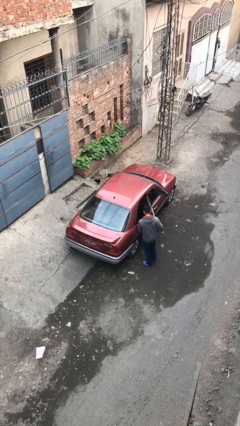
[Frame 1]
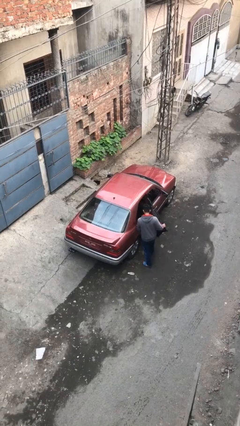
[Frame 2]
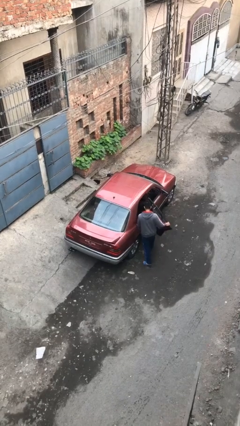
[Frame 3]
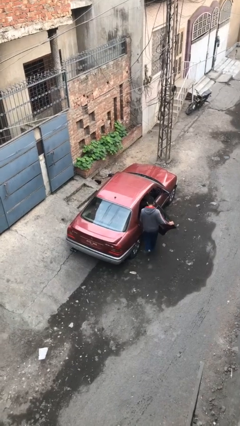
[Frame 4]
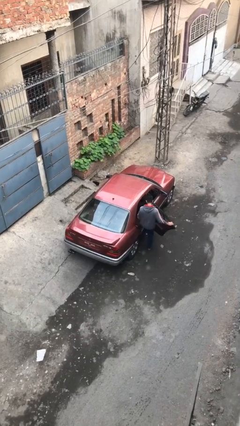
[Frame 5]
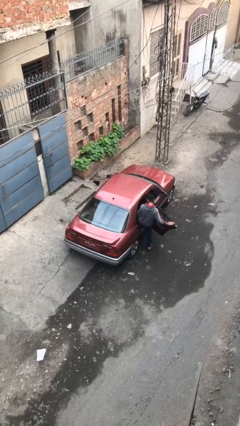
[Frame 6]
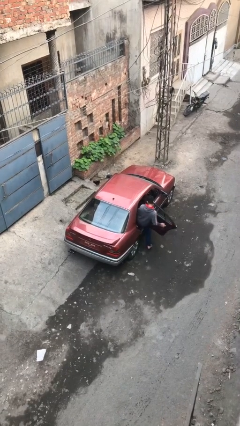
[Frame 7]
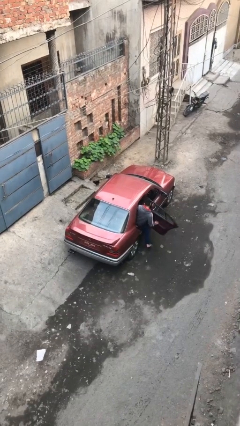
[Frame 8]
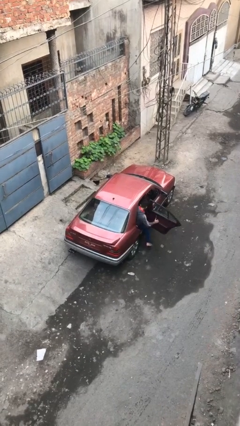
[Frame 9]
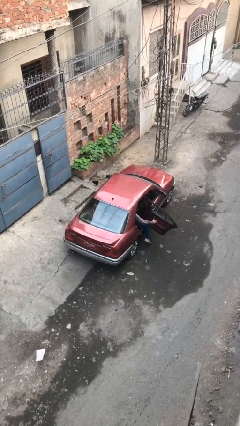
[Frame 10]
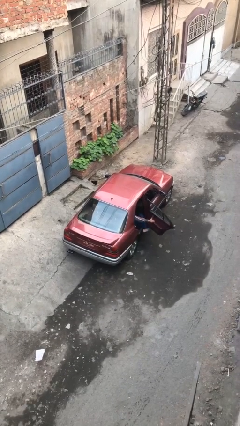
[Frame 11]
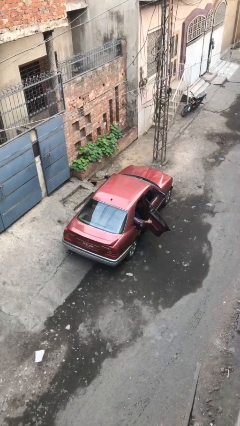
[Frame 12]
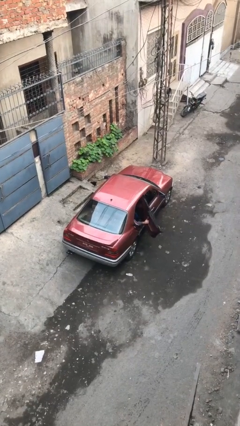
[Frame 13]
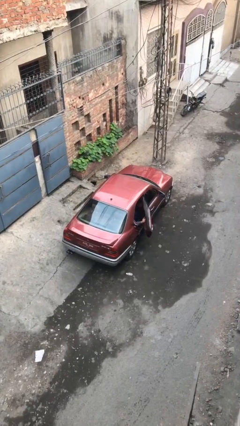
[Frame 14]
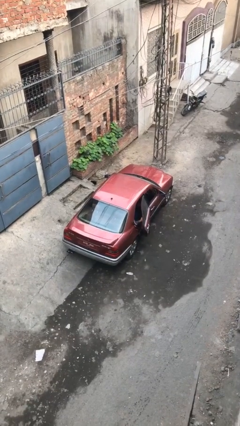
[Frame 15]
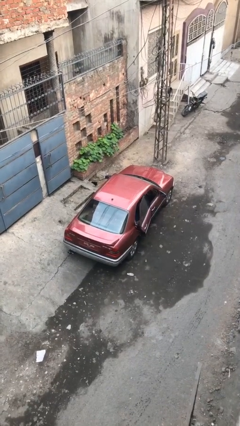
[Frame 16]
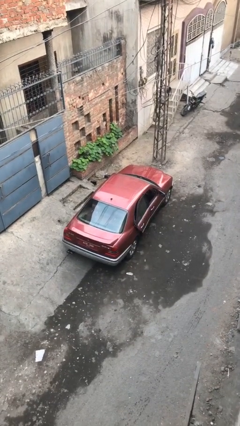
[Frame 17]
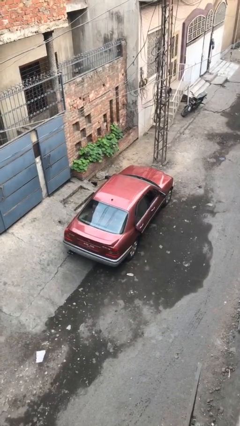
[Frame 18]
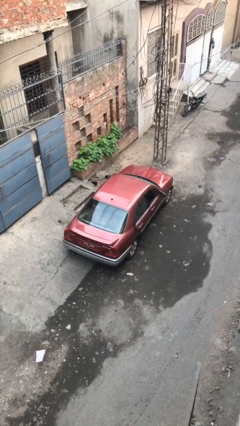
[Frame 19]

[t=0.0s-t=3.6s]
car picks up person

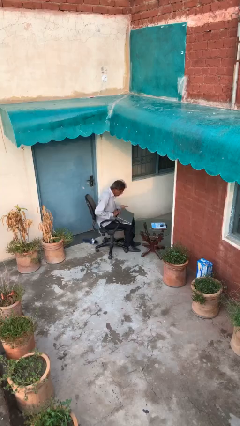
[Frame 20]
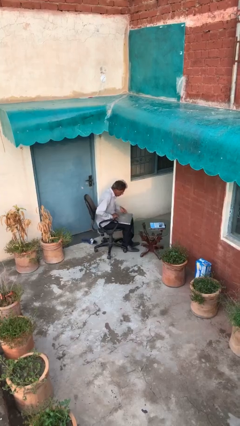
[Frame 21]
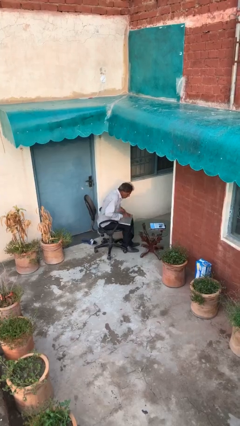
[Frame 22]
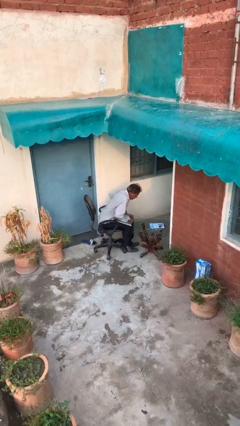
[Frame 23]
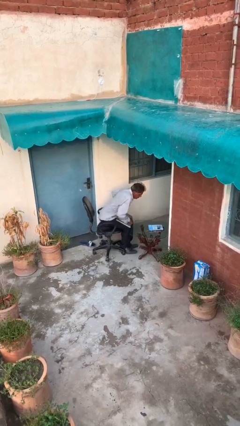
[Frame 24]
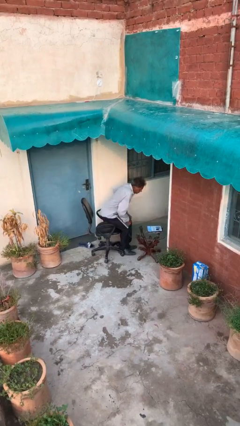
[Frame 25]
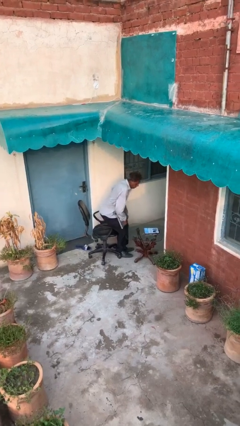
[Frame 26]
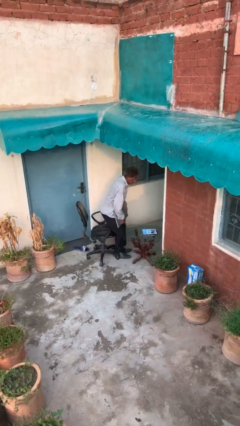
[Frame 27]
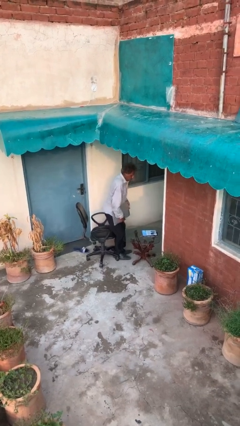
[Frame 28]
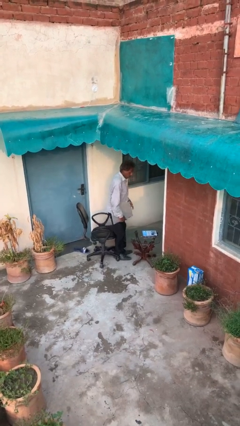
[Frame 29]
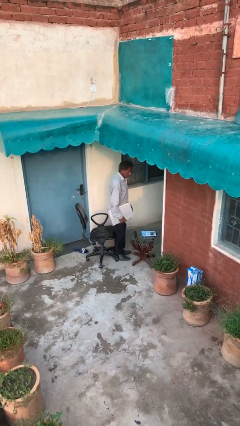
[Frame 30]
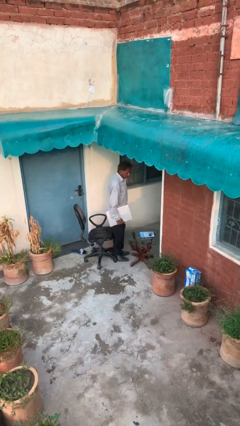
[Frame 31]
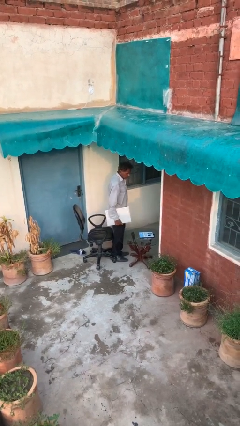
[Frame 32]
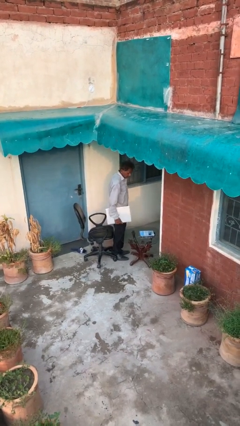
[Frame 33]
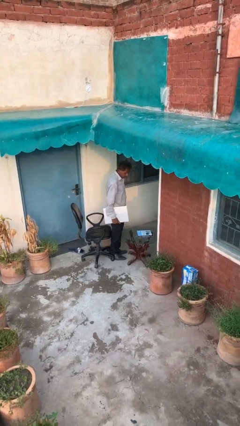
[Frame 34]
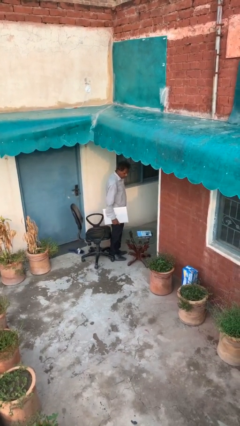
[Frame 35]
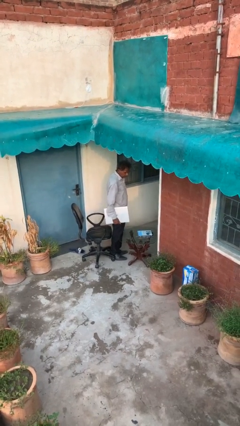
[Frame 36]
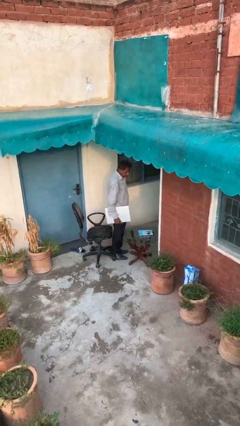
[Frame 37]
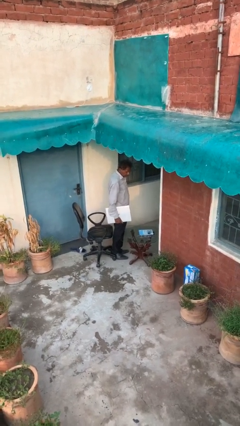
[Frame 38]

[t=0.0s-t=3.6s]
person stands up

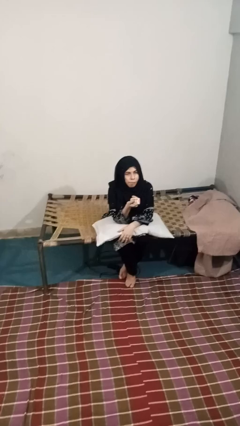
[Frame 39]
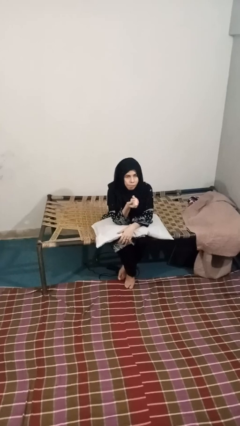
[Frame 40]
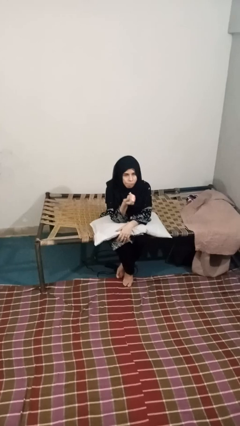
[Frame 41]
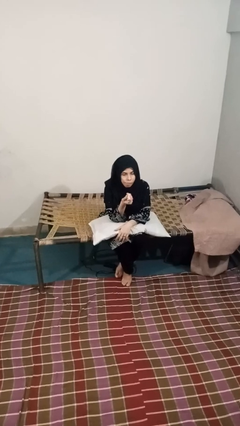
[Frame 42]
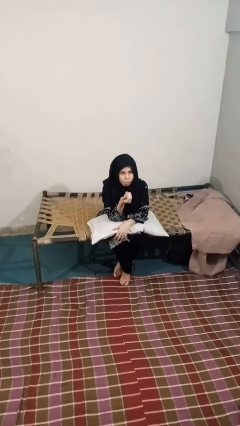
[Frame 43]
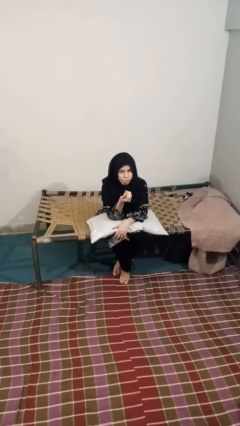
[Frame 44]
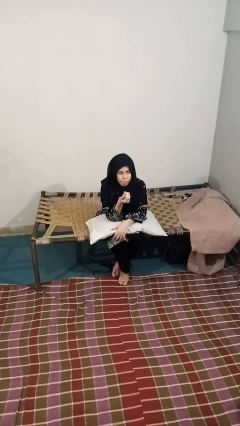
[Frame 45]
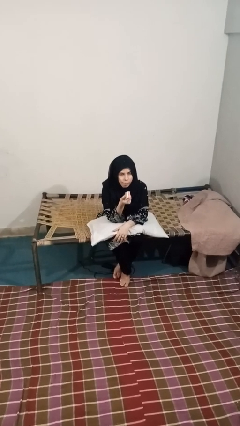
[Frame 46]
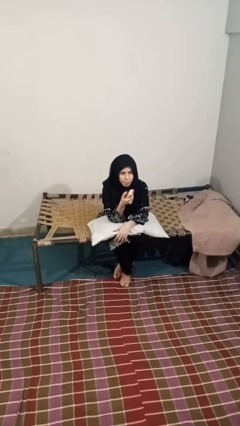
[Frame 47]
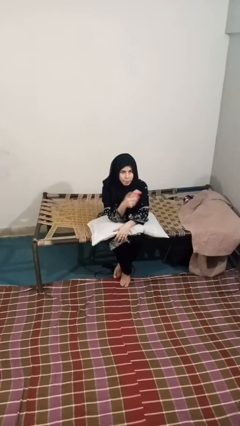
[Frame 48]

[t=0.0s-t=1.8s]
person uses television remote

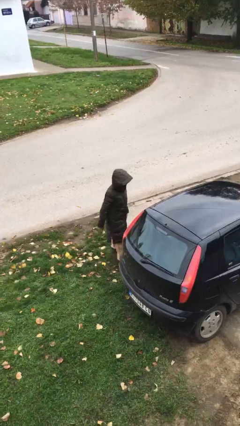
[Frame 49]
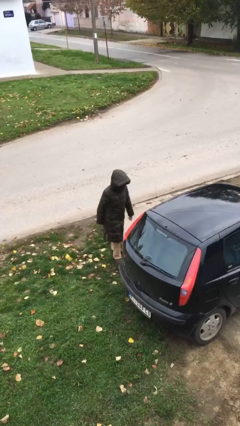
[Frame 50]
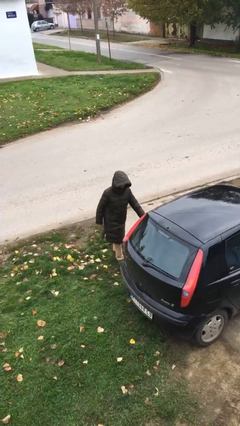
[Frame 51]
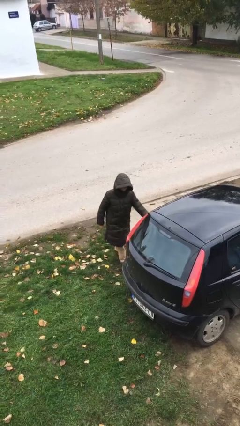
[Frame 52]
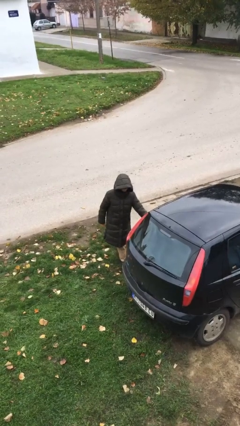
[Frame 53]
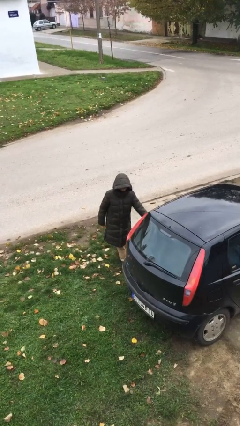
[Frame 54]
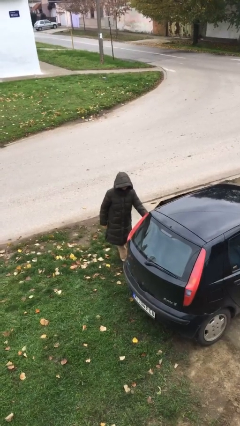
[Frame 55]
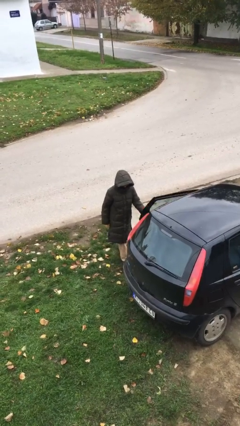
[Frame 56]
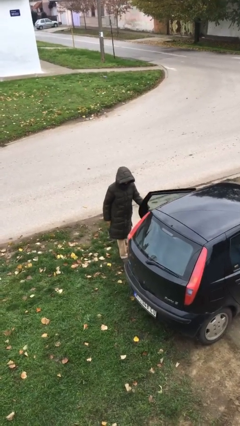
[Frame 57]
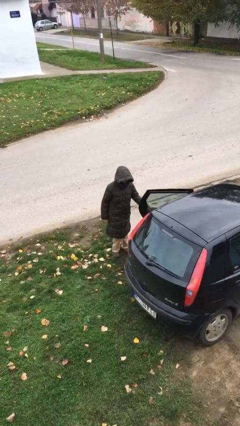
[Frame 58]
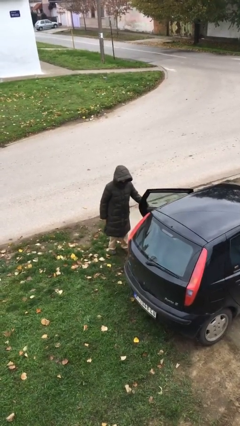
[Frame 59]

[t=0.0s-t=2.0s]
person opens car door

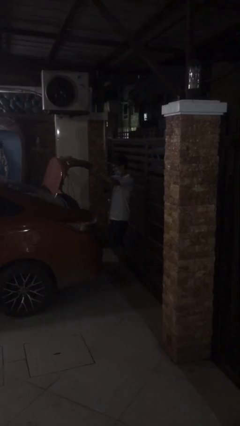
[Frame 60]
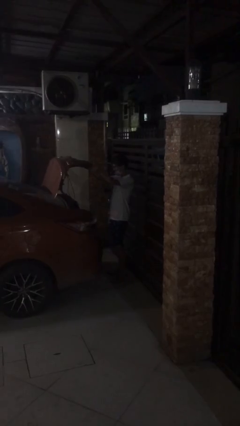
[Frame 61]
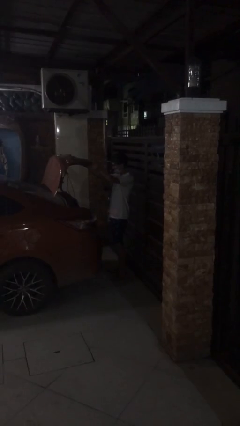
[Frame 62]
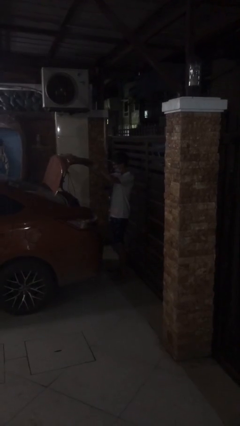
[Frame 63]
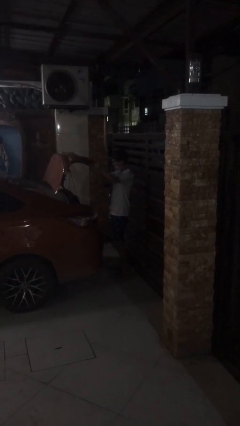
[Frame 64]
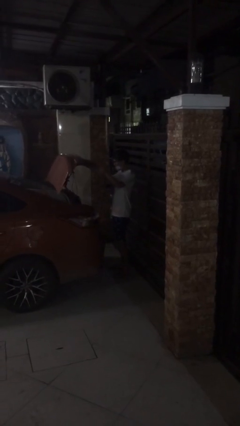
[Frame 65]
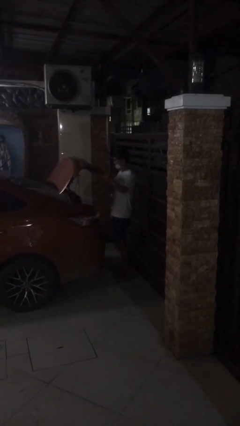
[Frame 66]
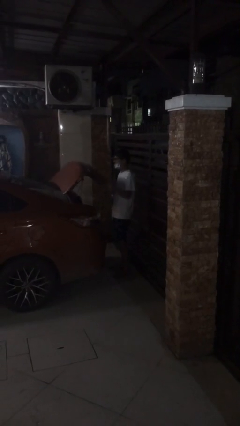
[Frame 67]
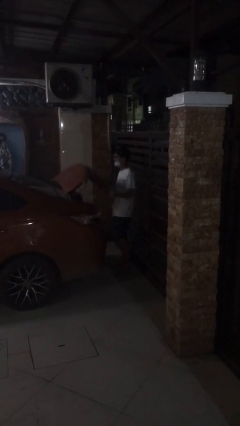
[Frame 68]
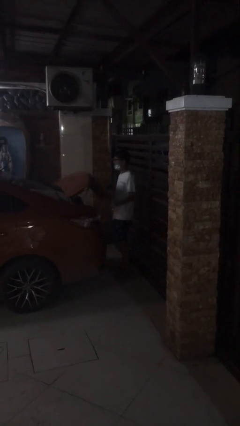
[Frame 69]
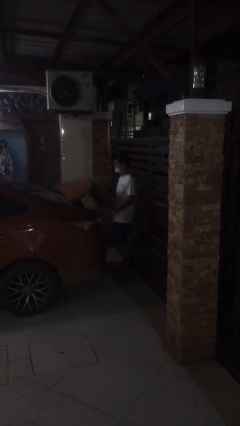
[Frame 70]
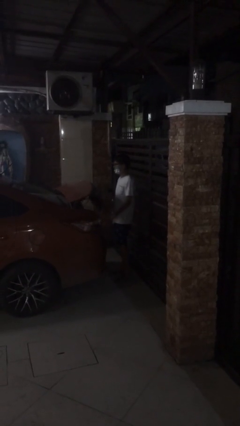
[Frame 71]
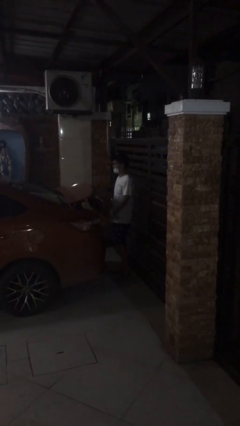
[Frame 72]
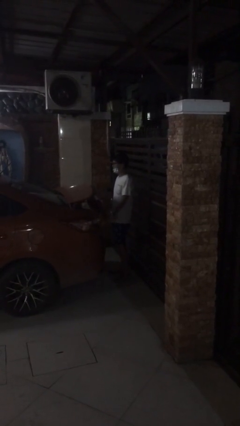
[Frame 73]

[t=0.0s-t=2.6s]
person closes car trunk

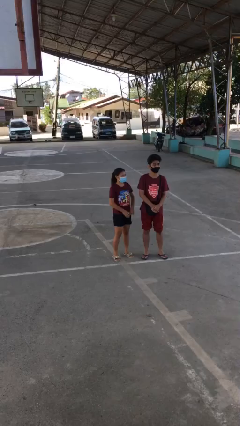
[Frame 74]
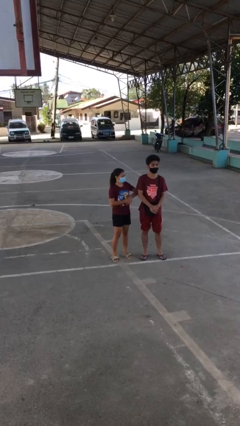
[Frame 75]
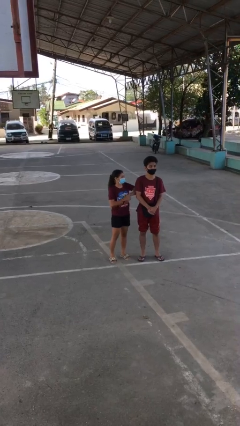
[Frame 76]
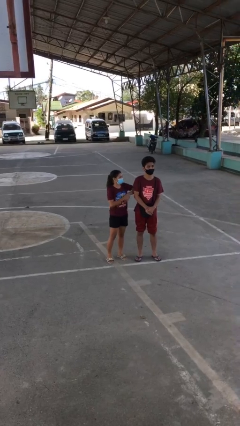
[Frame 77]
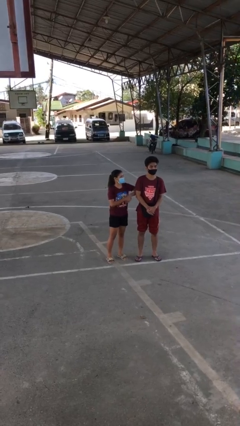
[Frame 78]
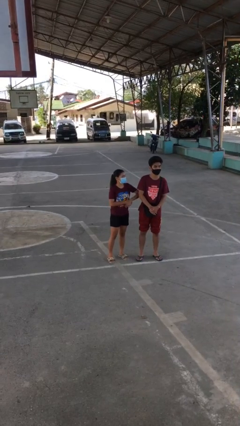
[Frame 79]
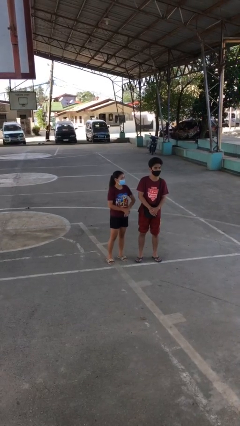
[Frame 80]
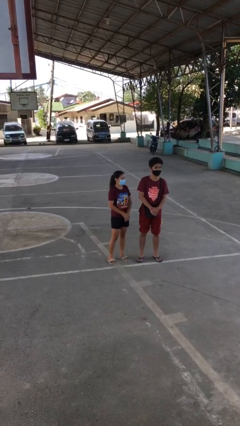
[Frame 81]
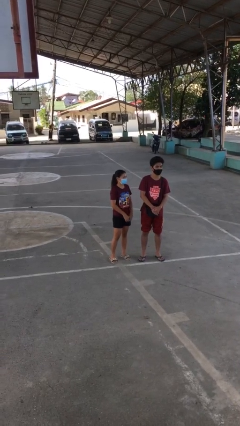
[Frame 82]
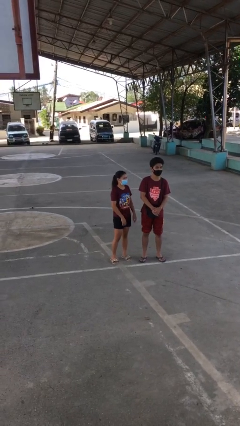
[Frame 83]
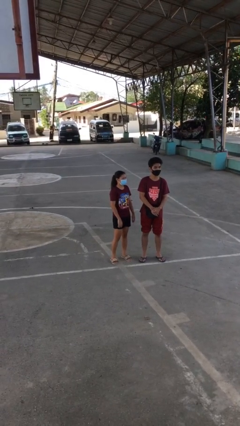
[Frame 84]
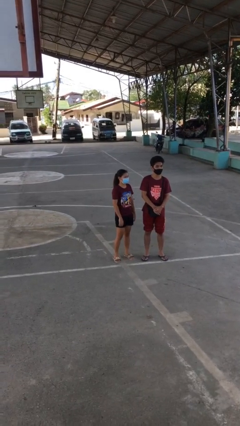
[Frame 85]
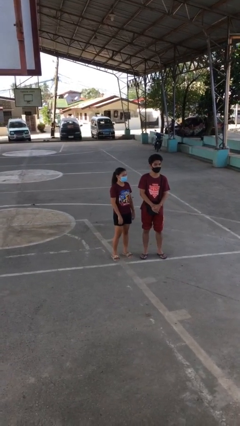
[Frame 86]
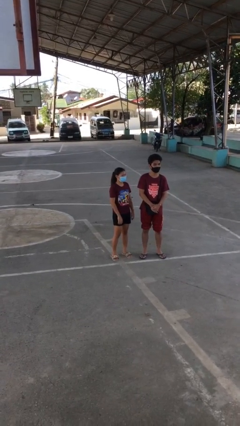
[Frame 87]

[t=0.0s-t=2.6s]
person nudges person with elbow

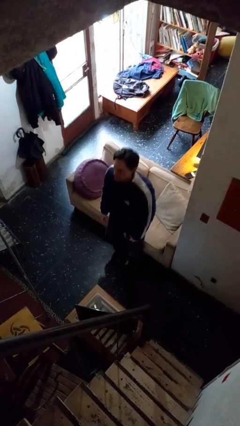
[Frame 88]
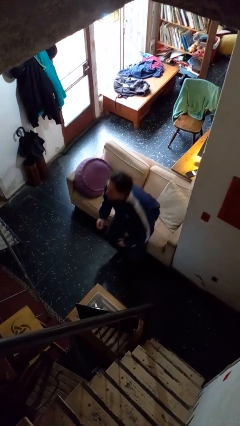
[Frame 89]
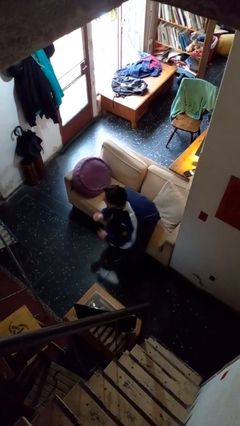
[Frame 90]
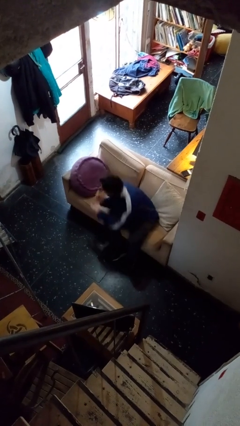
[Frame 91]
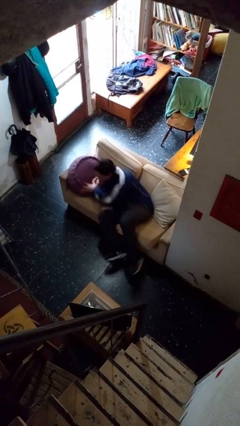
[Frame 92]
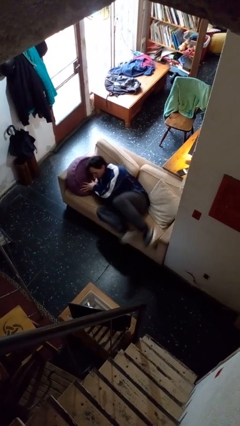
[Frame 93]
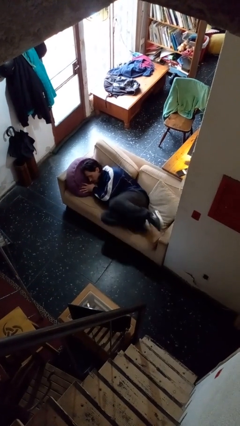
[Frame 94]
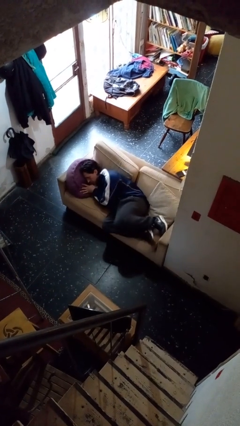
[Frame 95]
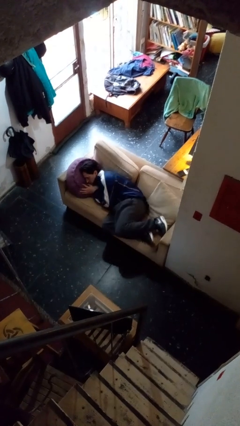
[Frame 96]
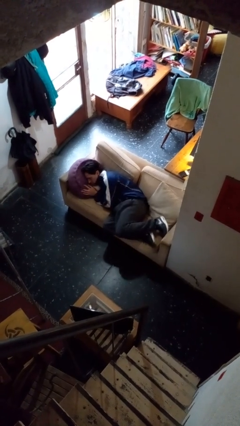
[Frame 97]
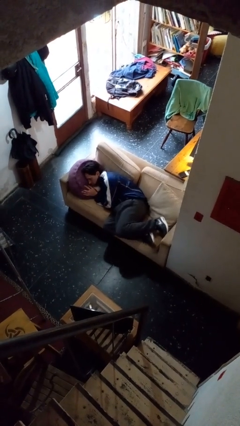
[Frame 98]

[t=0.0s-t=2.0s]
person lies down on couch
